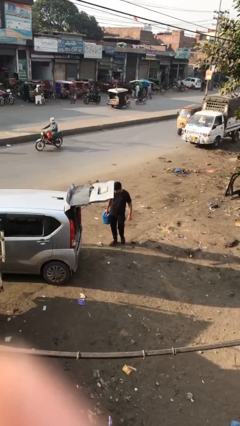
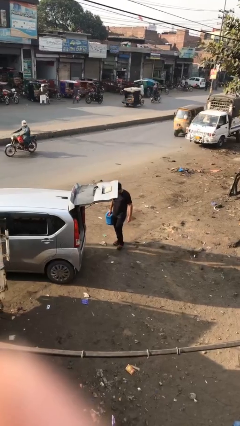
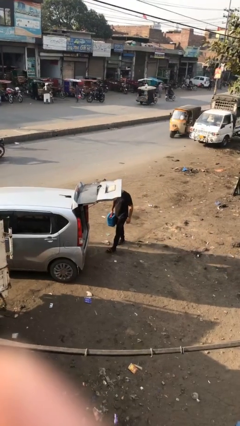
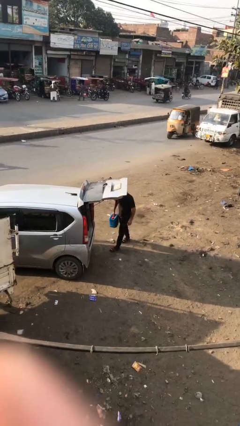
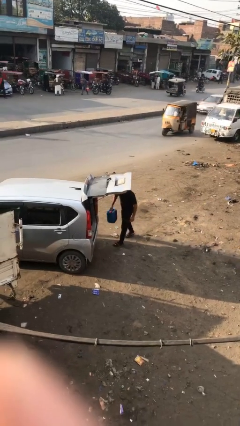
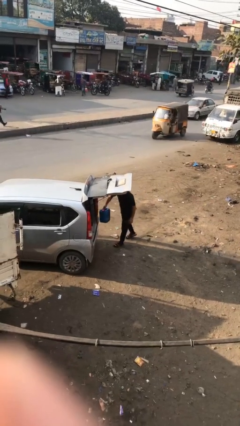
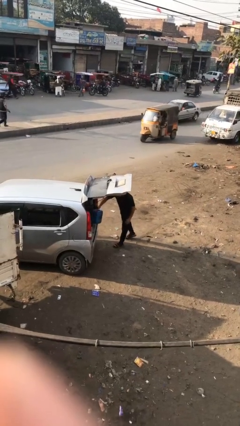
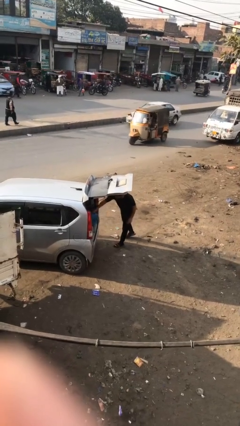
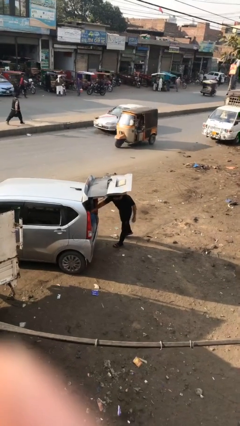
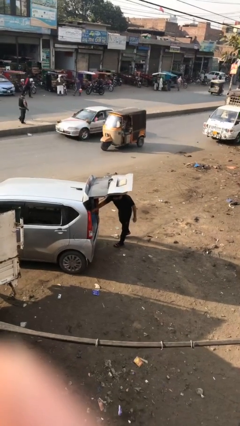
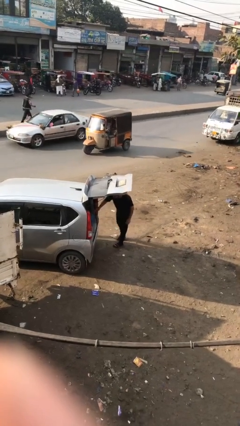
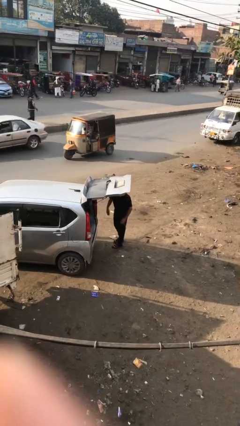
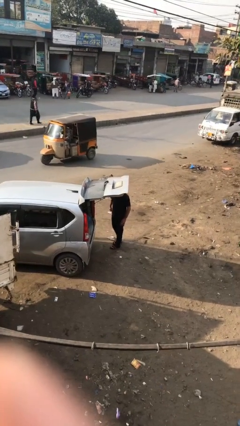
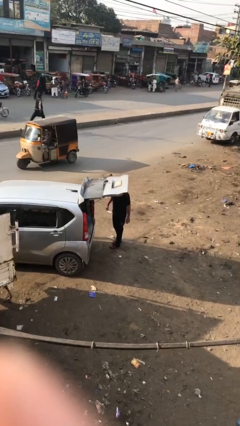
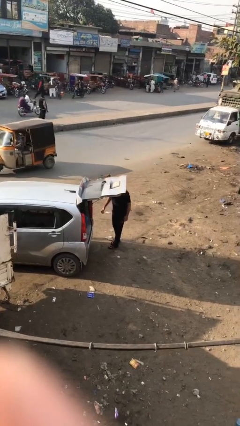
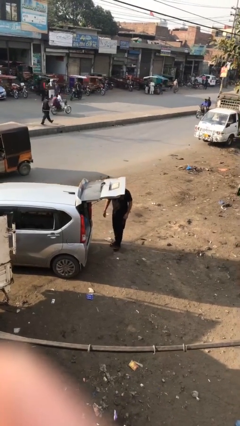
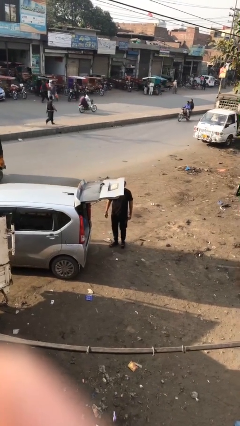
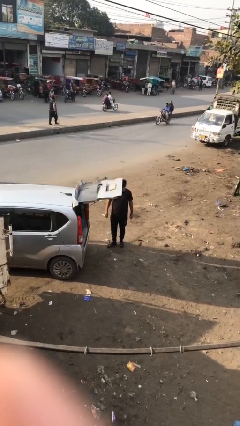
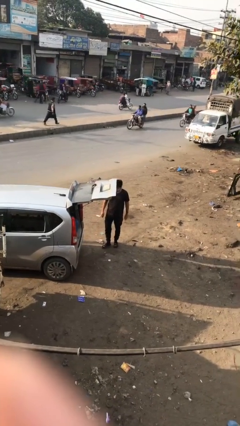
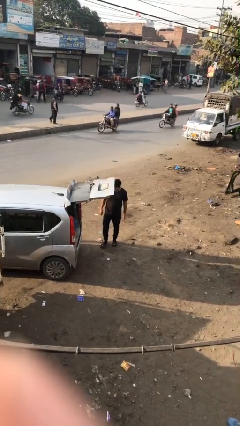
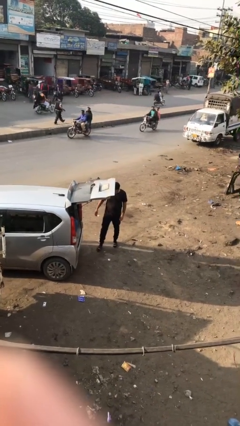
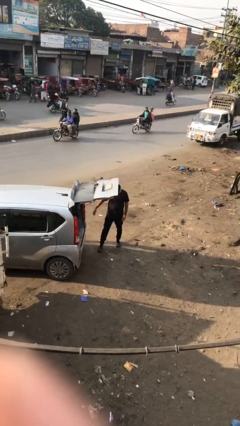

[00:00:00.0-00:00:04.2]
person loads car

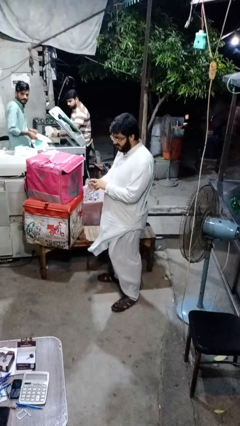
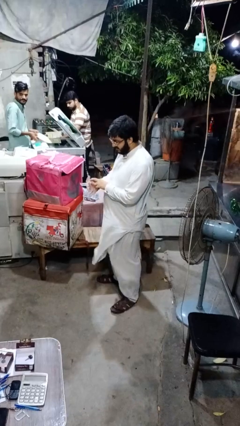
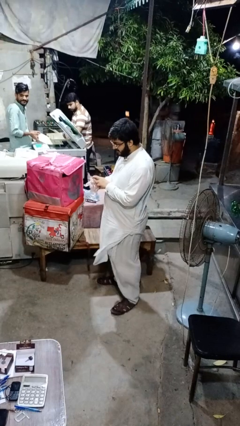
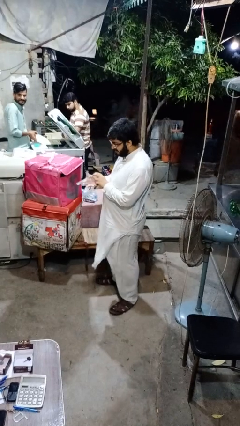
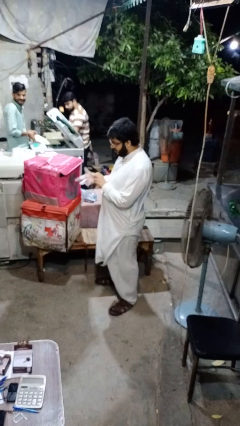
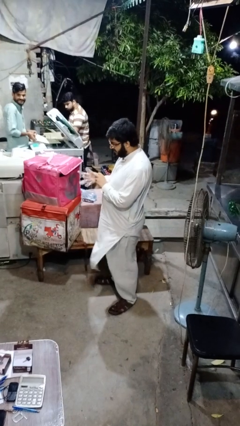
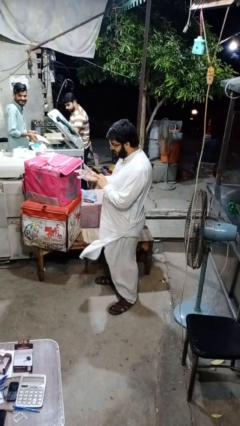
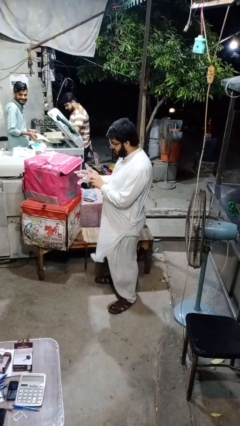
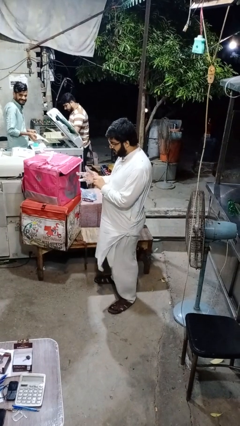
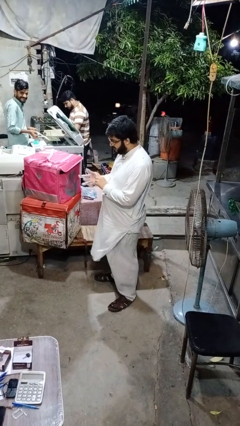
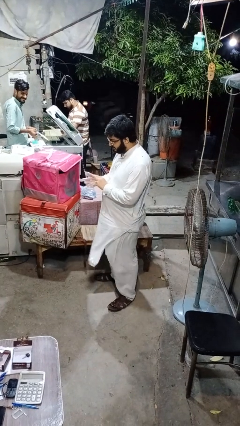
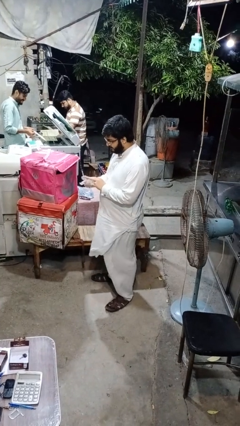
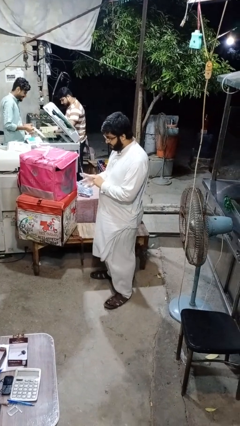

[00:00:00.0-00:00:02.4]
person puts on gloves

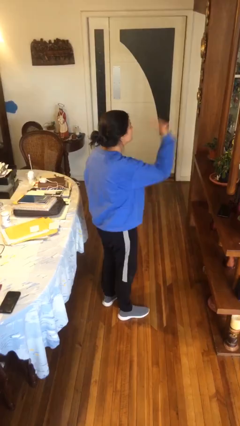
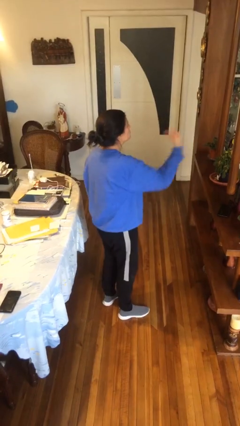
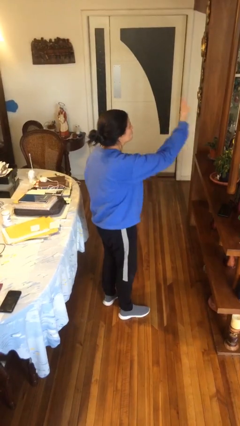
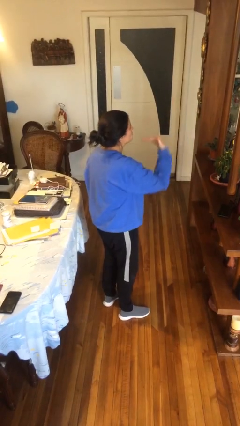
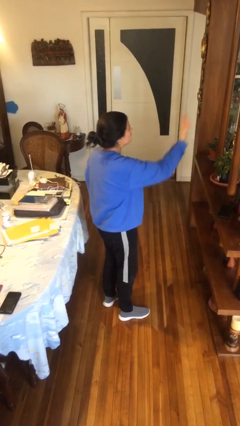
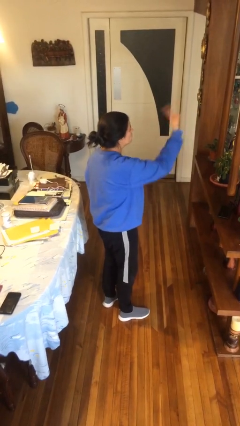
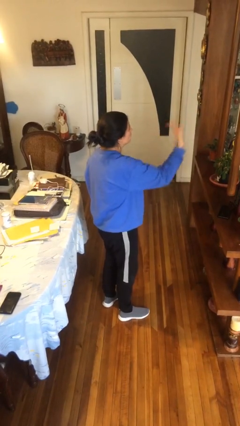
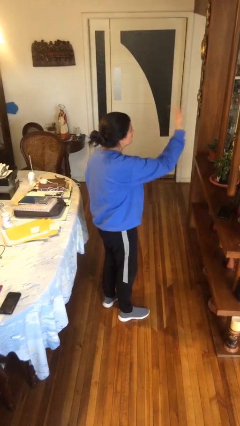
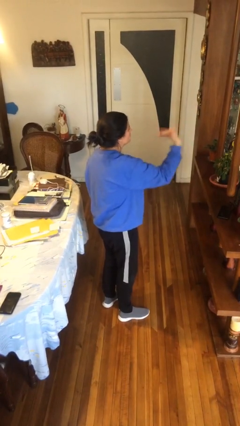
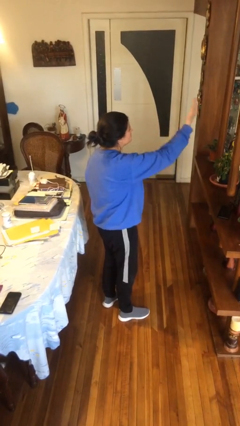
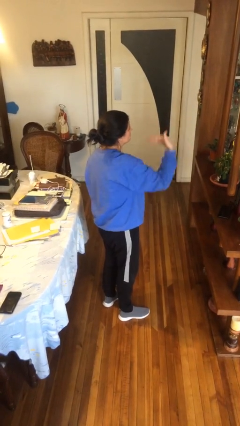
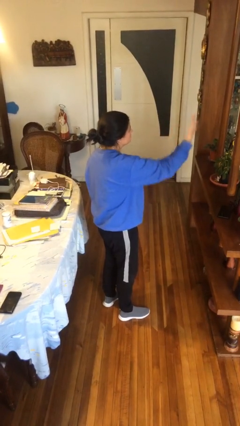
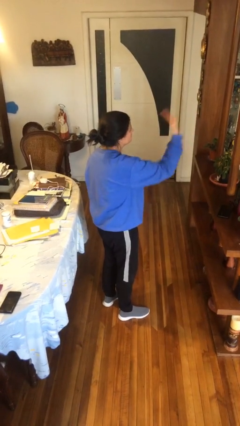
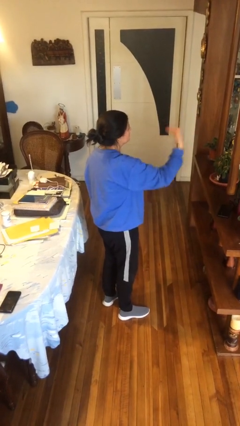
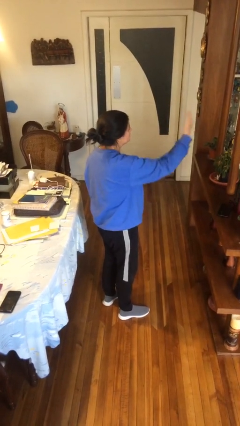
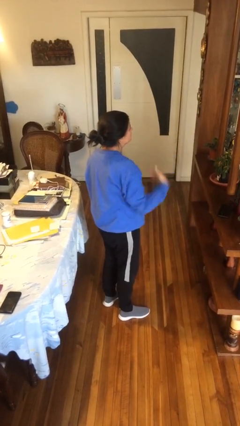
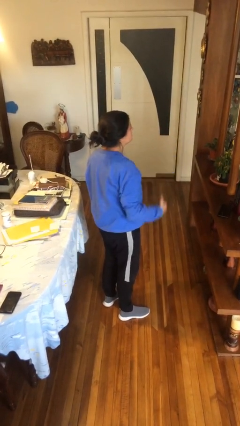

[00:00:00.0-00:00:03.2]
person gestures come here

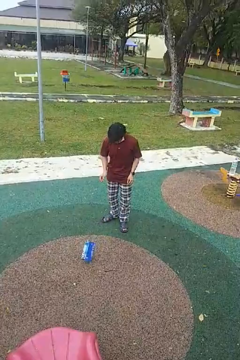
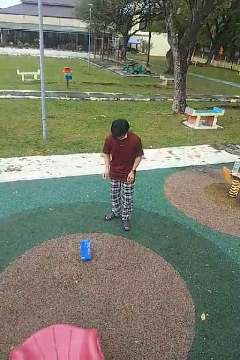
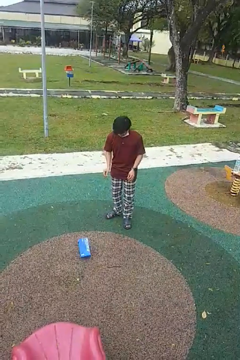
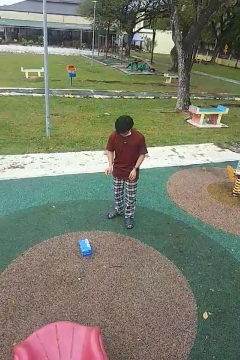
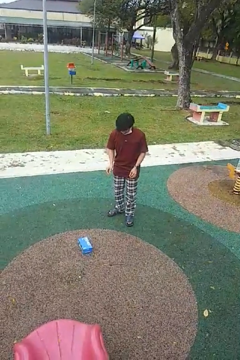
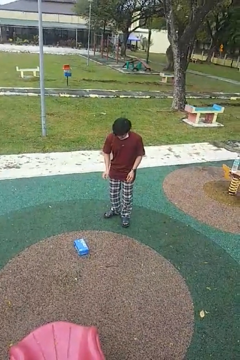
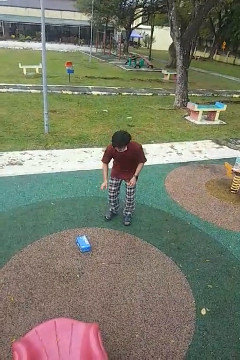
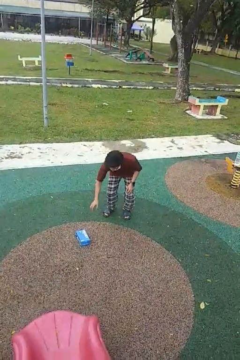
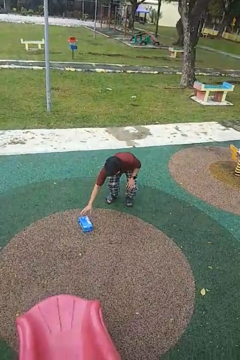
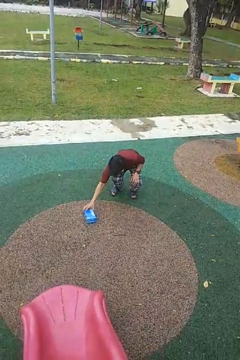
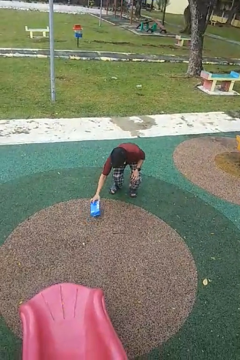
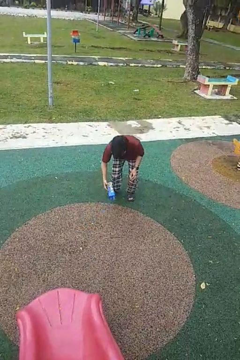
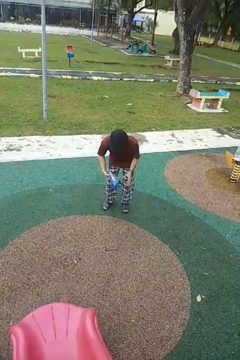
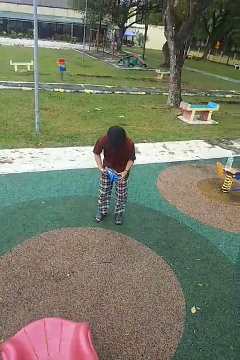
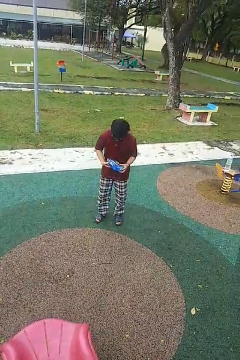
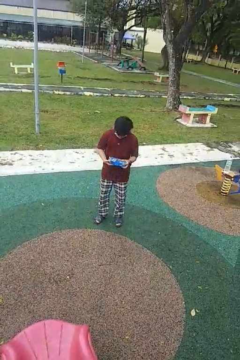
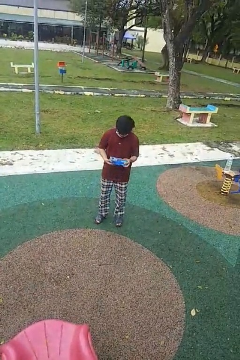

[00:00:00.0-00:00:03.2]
person picks up object from floor

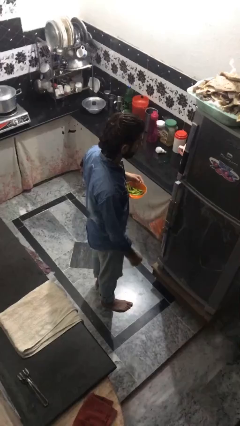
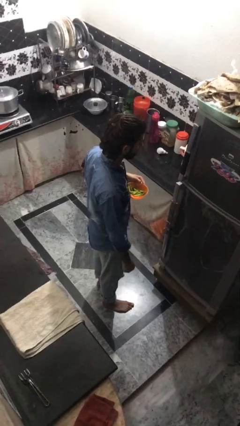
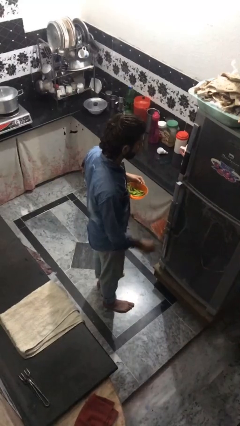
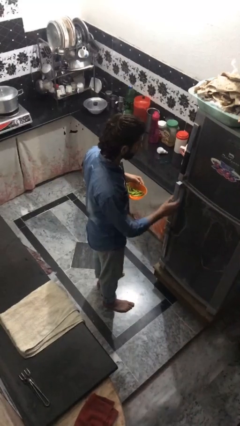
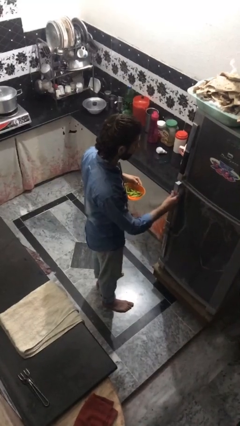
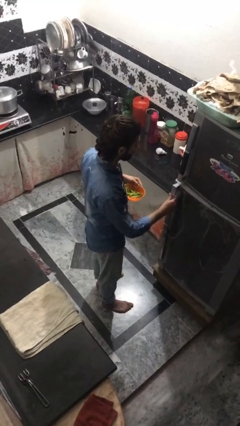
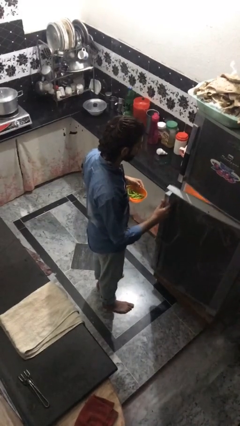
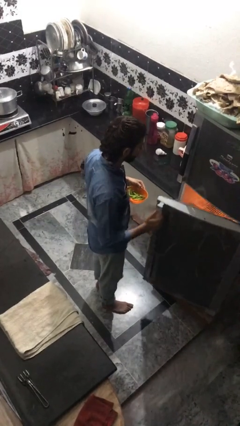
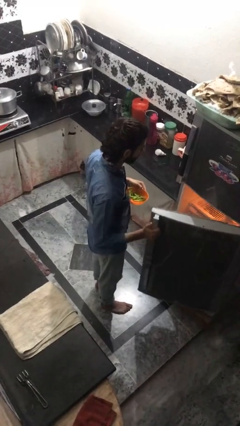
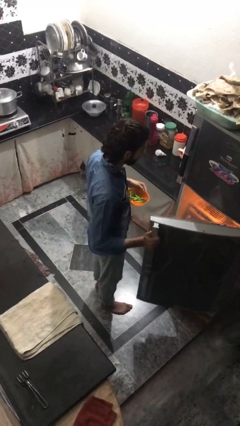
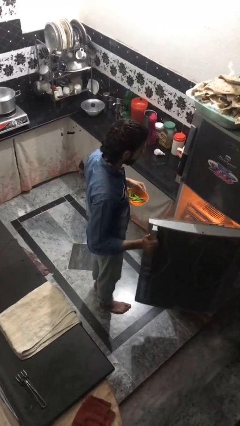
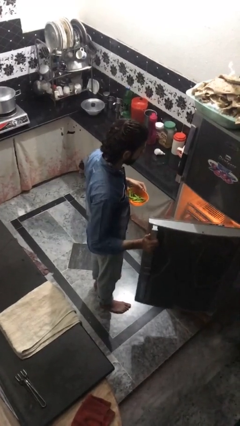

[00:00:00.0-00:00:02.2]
person opens refrigerator

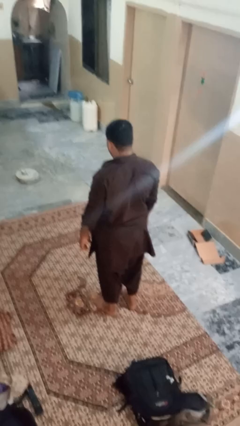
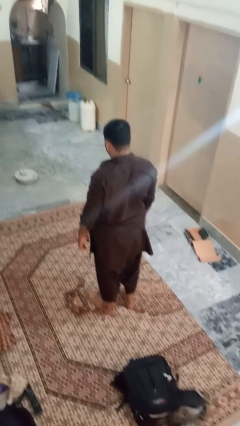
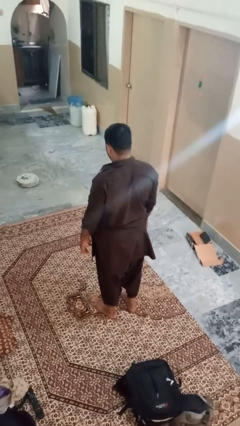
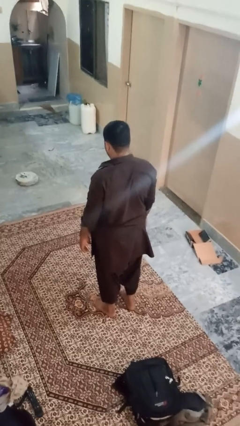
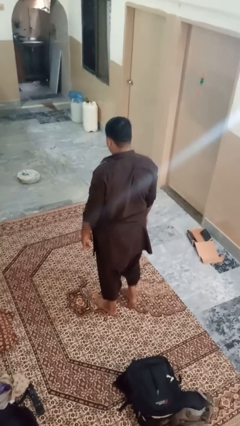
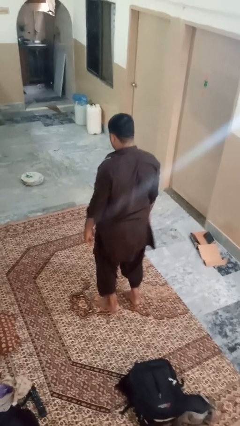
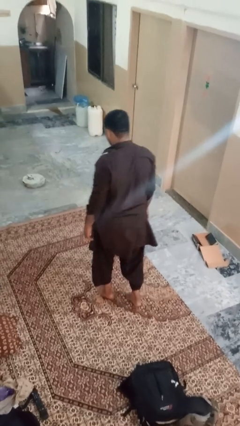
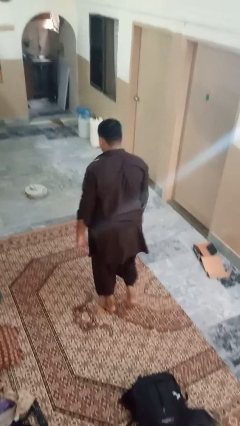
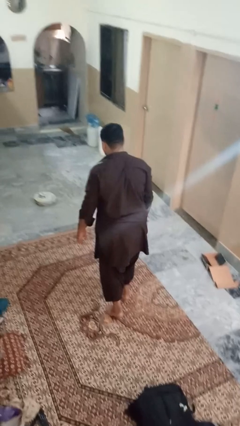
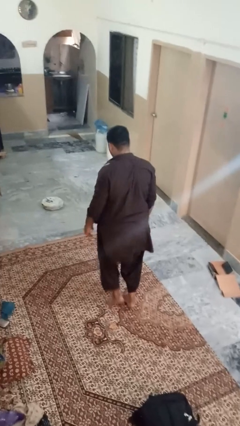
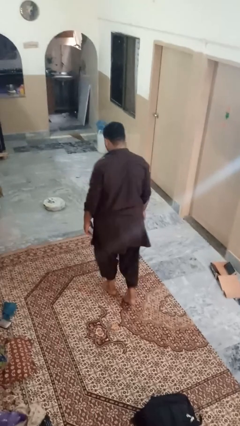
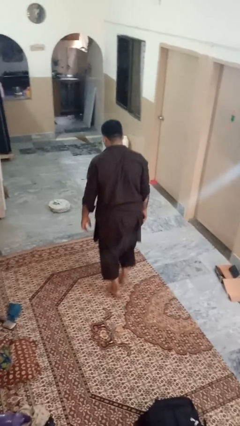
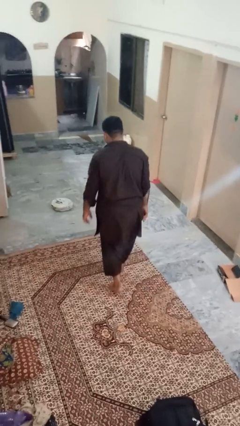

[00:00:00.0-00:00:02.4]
person walks tiptoe

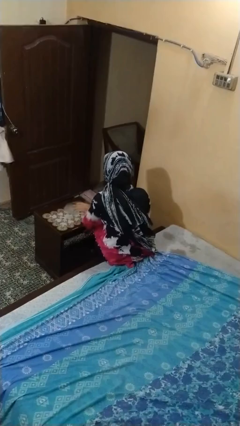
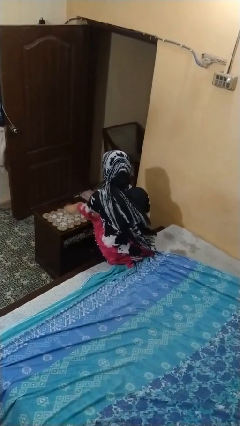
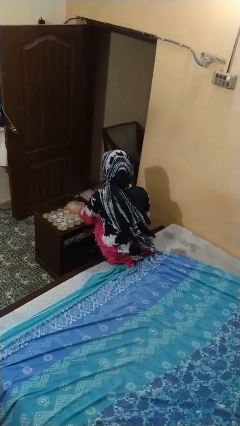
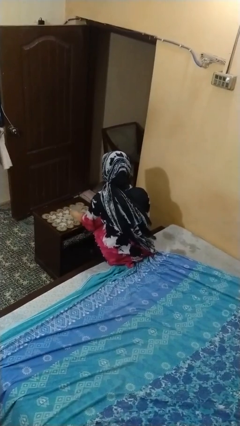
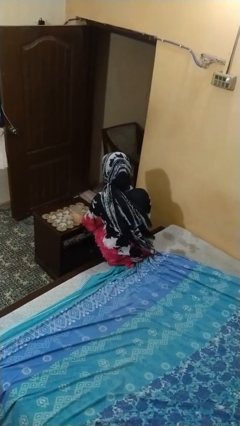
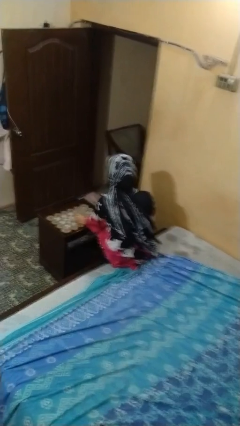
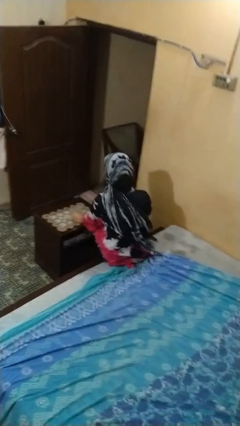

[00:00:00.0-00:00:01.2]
person sets upright glass
